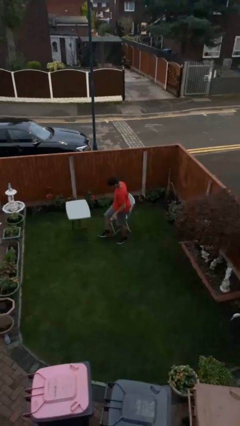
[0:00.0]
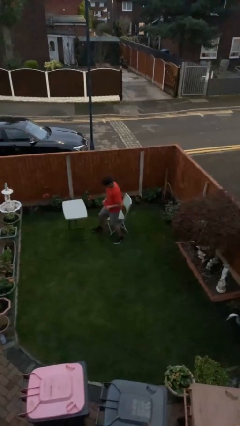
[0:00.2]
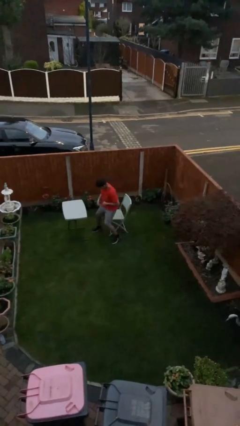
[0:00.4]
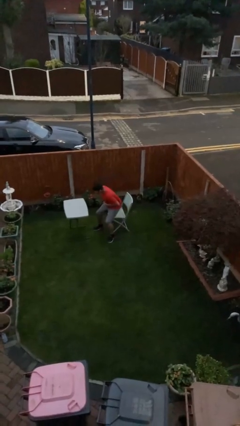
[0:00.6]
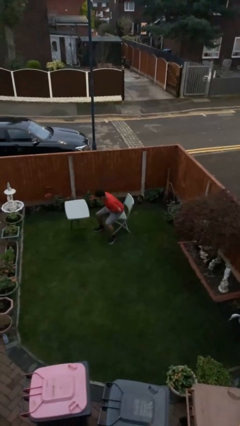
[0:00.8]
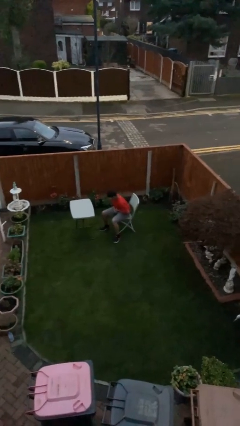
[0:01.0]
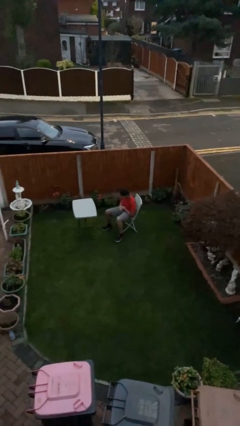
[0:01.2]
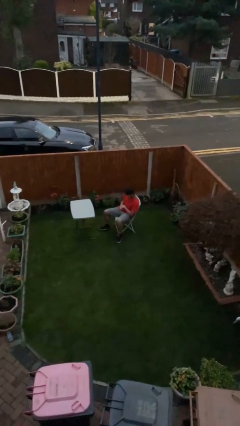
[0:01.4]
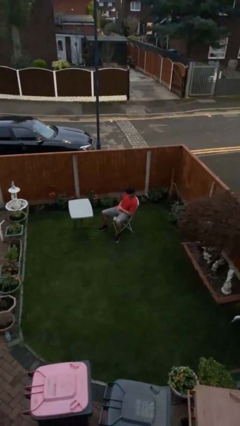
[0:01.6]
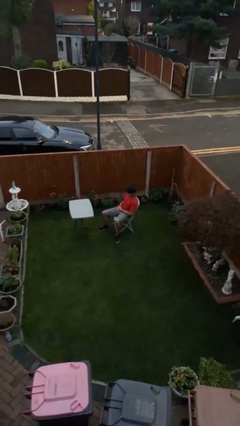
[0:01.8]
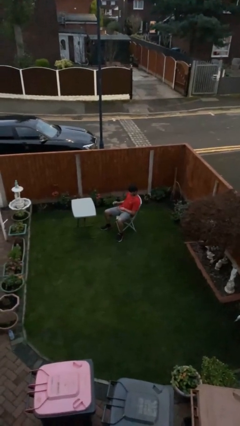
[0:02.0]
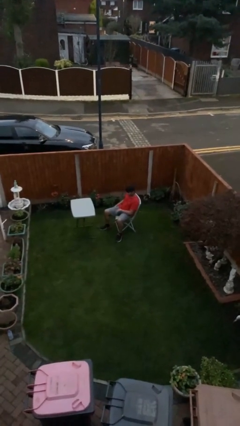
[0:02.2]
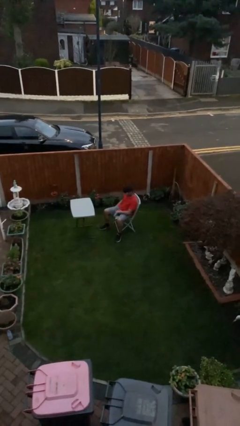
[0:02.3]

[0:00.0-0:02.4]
person sits down

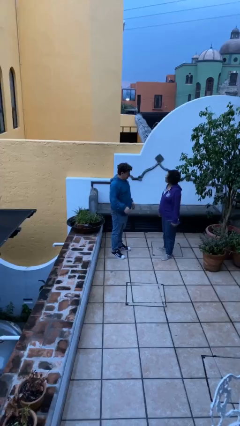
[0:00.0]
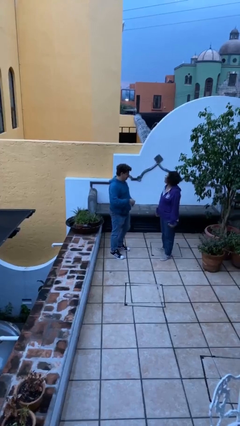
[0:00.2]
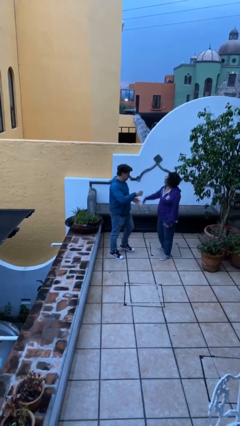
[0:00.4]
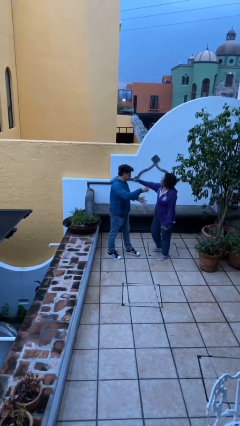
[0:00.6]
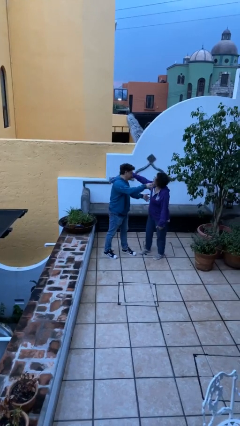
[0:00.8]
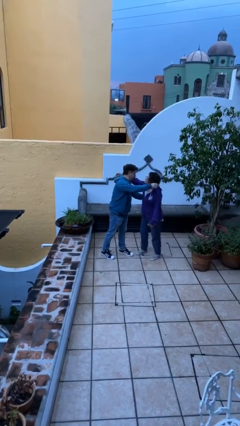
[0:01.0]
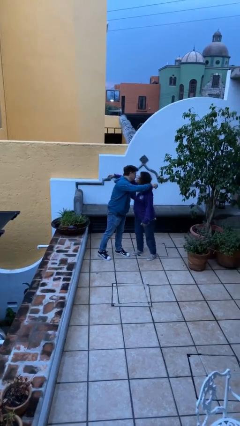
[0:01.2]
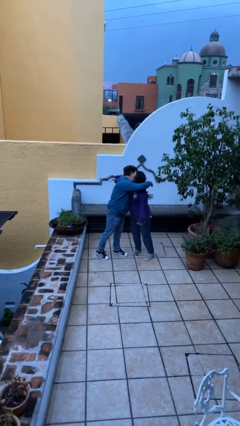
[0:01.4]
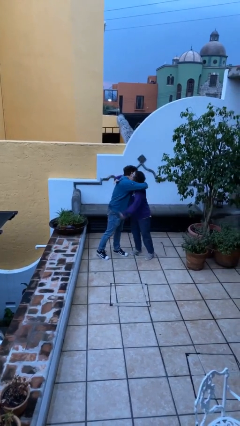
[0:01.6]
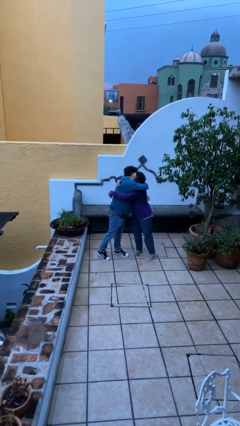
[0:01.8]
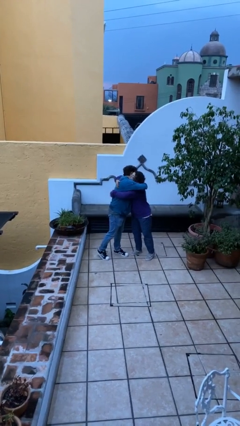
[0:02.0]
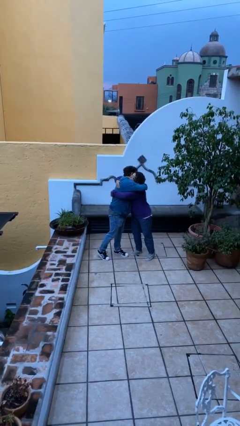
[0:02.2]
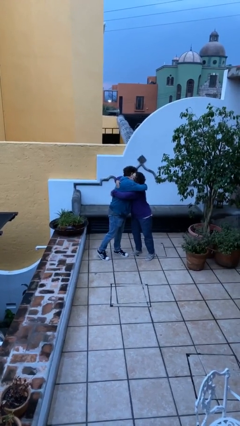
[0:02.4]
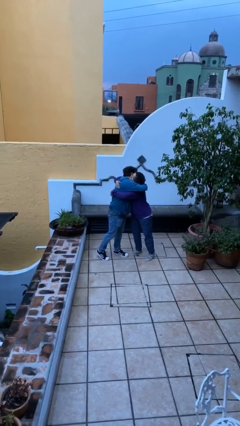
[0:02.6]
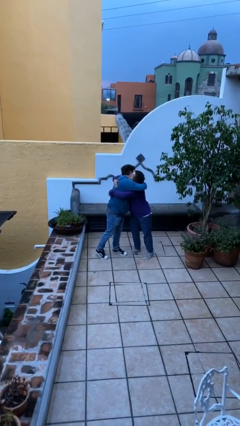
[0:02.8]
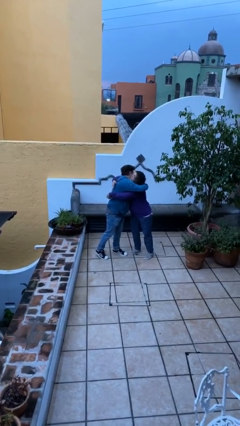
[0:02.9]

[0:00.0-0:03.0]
person embraces person

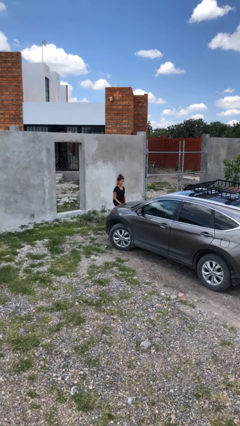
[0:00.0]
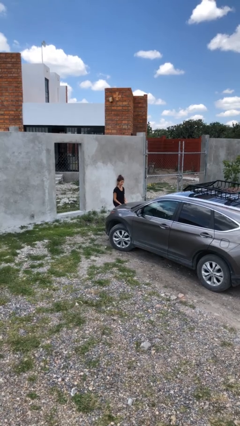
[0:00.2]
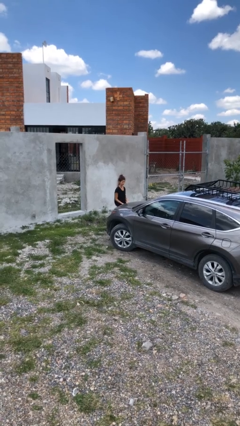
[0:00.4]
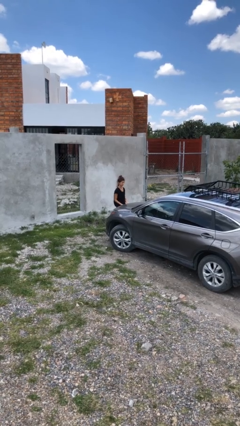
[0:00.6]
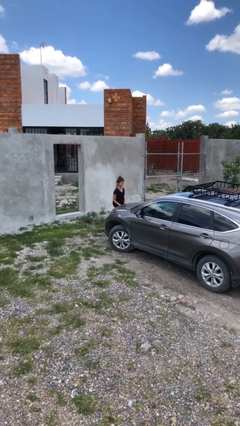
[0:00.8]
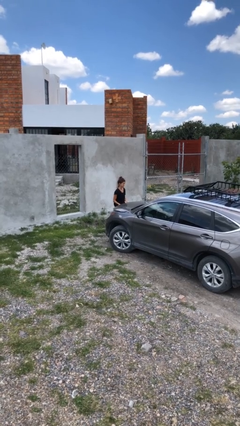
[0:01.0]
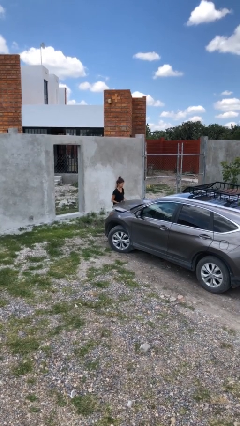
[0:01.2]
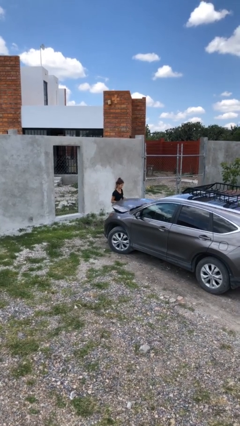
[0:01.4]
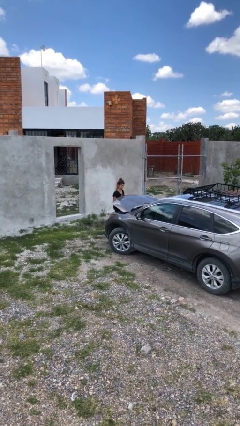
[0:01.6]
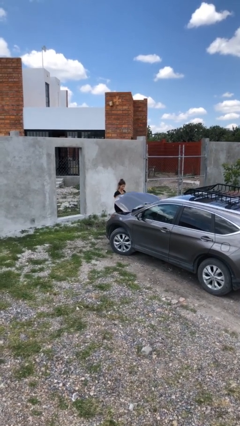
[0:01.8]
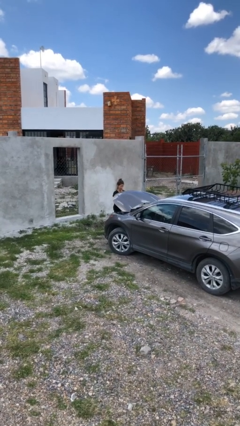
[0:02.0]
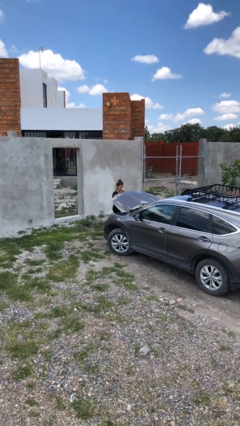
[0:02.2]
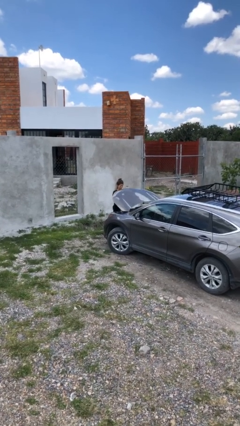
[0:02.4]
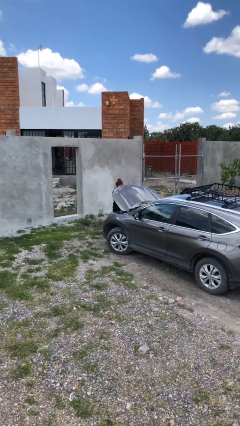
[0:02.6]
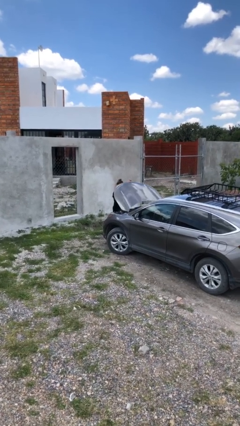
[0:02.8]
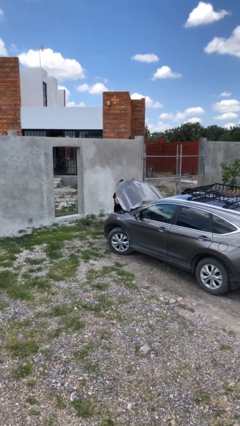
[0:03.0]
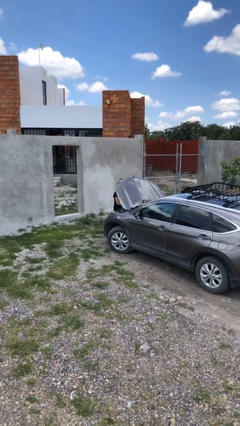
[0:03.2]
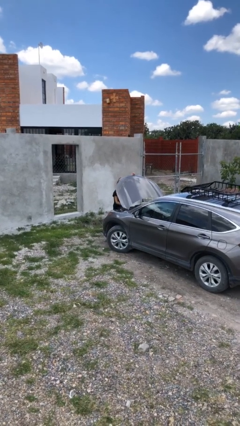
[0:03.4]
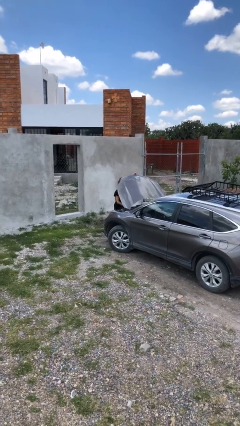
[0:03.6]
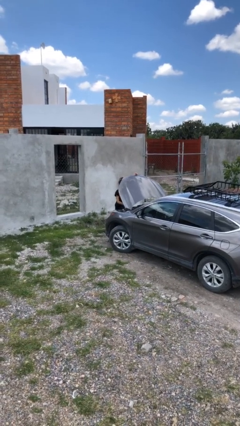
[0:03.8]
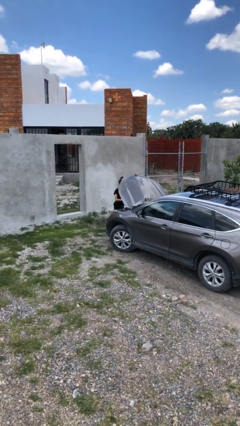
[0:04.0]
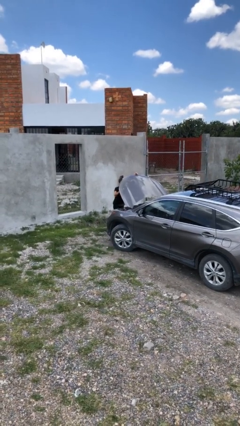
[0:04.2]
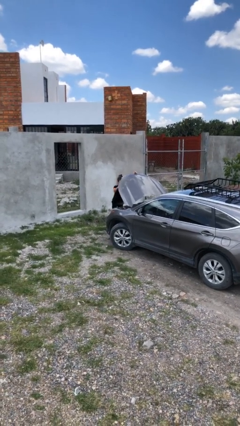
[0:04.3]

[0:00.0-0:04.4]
person opens car hood

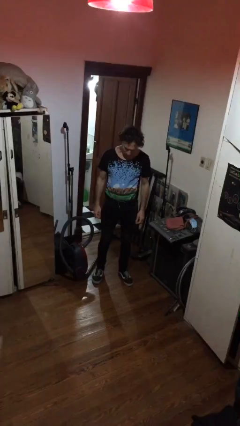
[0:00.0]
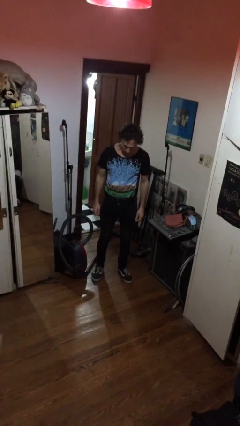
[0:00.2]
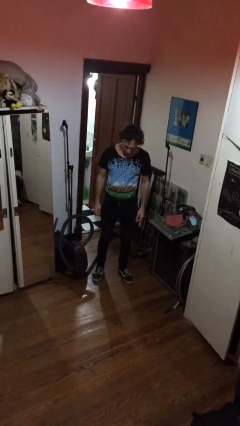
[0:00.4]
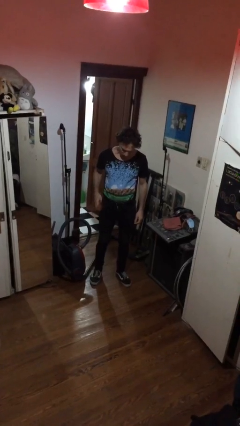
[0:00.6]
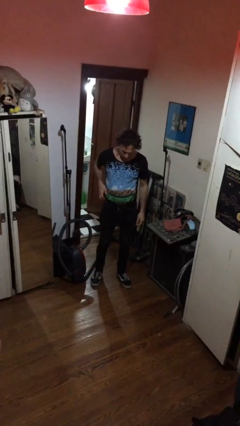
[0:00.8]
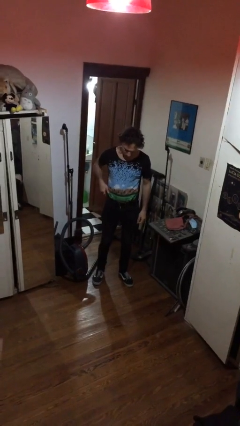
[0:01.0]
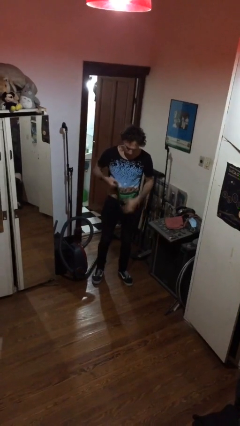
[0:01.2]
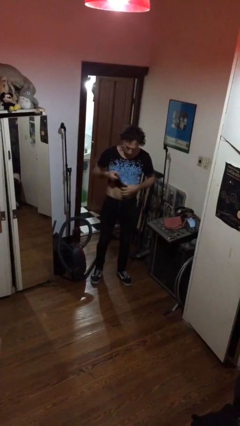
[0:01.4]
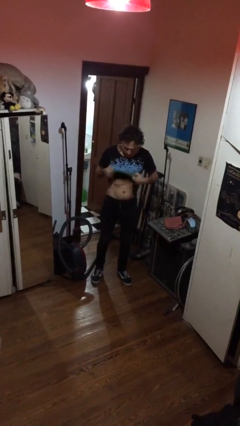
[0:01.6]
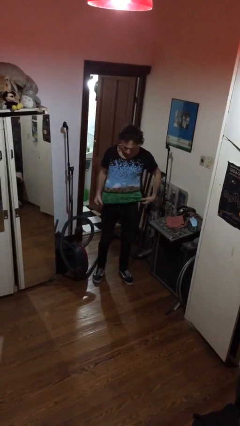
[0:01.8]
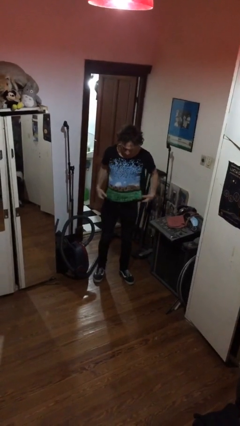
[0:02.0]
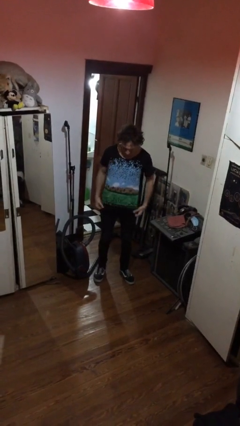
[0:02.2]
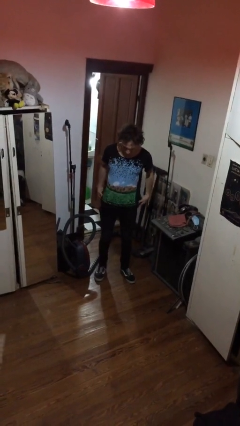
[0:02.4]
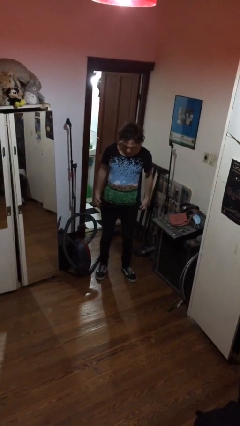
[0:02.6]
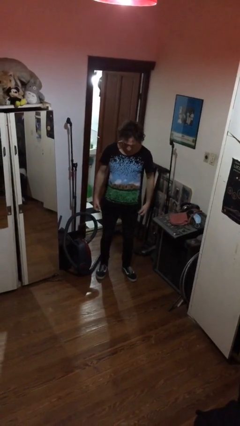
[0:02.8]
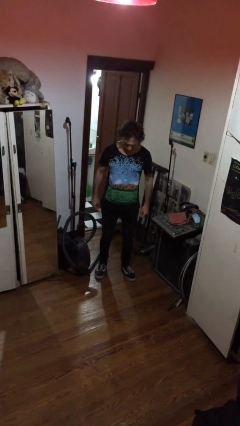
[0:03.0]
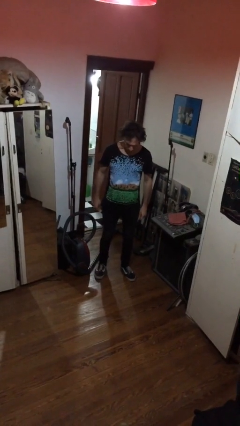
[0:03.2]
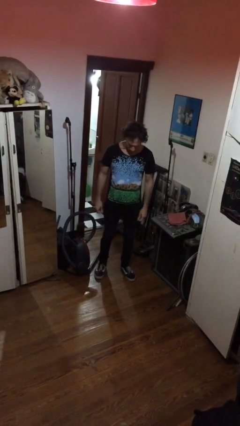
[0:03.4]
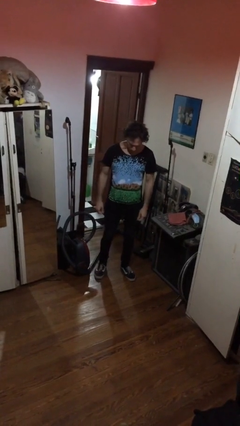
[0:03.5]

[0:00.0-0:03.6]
person untucks shirt

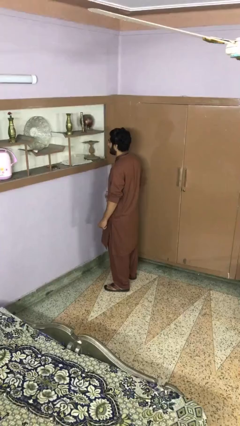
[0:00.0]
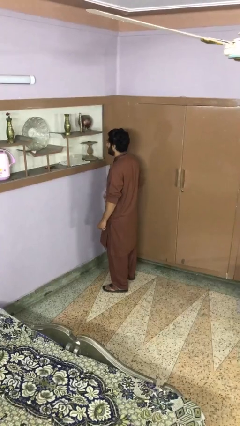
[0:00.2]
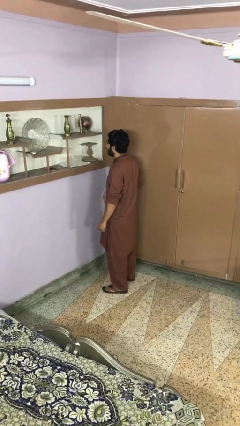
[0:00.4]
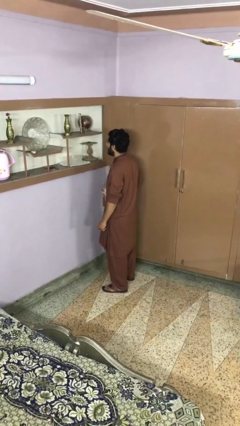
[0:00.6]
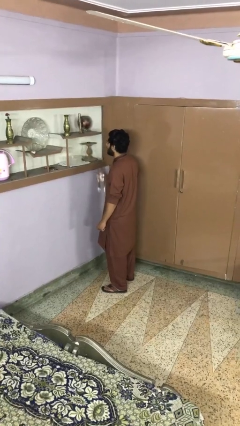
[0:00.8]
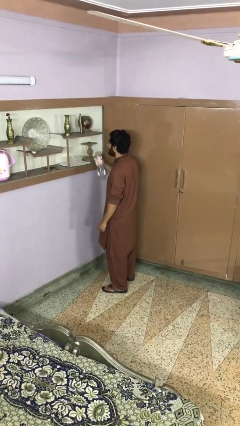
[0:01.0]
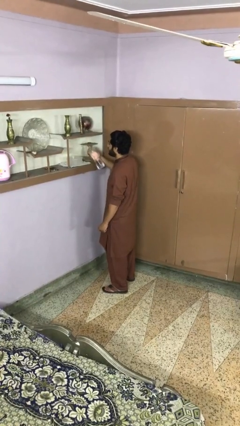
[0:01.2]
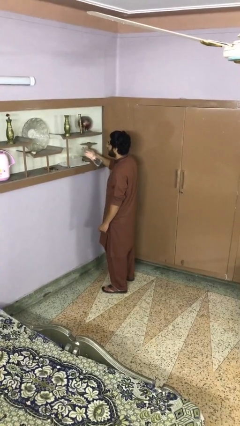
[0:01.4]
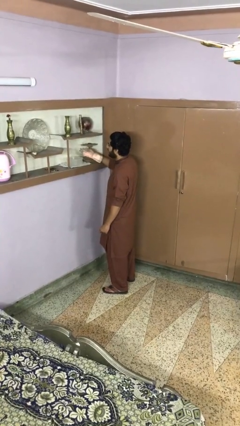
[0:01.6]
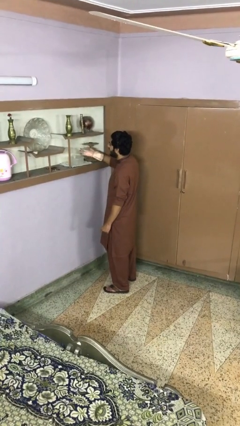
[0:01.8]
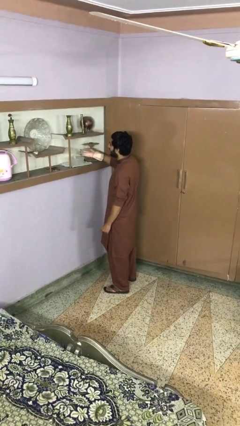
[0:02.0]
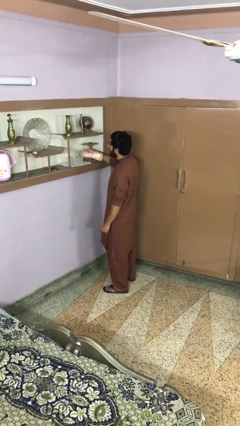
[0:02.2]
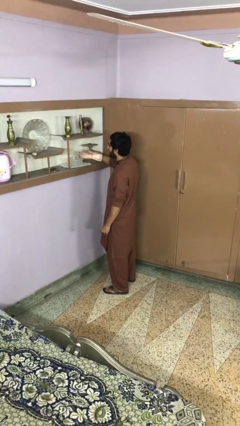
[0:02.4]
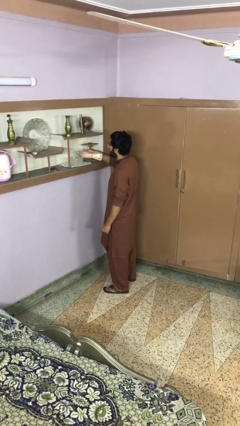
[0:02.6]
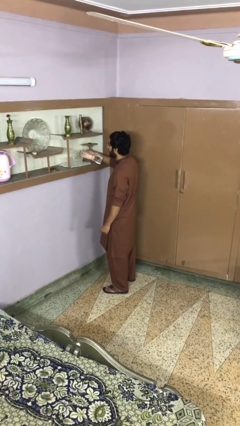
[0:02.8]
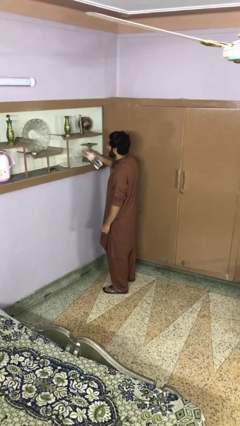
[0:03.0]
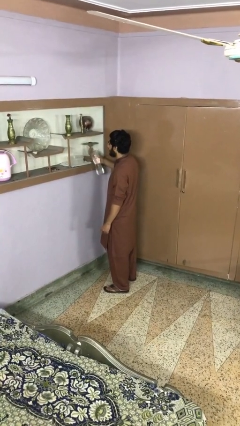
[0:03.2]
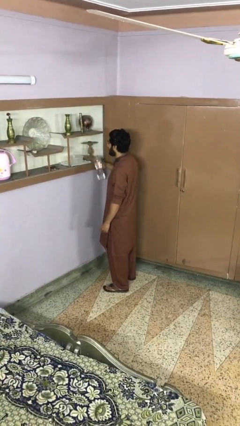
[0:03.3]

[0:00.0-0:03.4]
person pours into bowl

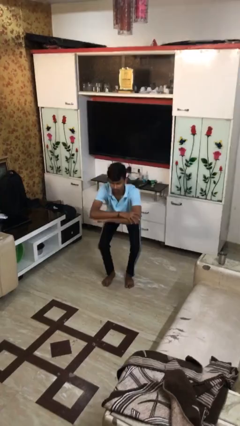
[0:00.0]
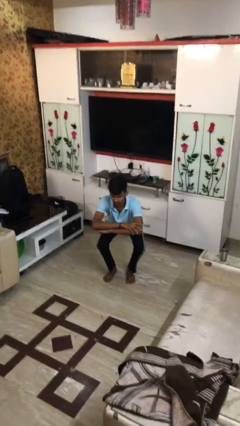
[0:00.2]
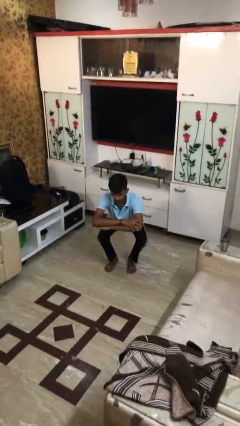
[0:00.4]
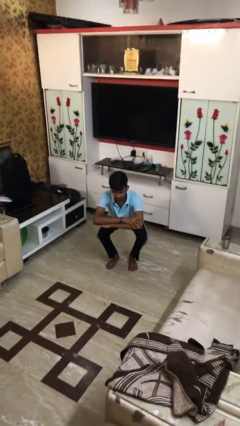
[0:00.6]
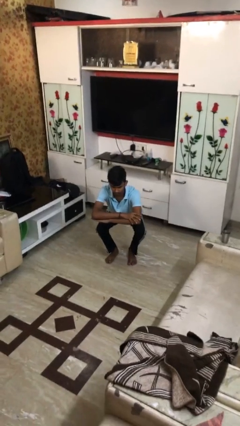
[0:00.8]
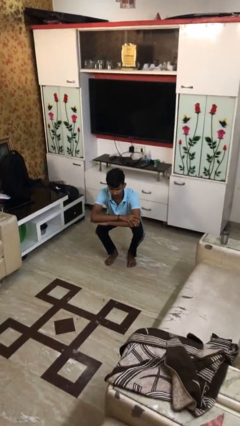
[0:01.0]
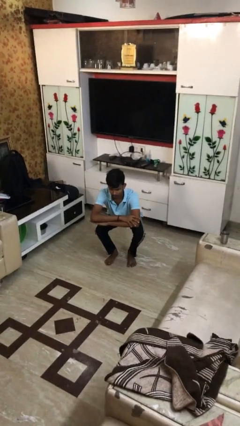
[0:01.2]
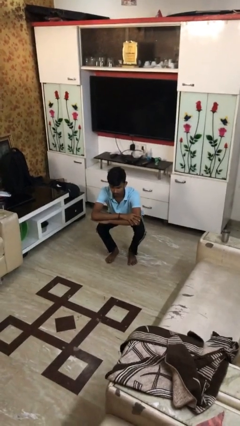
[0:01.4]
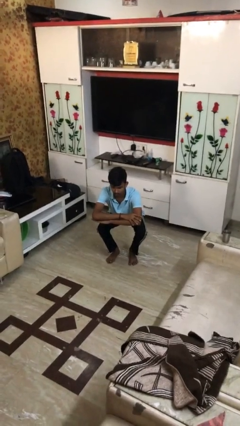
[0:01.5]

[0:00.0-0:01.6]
person squats
